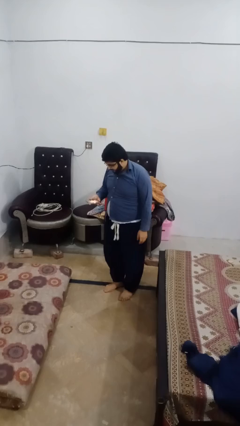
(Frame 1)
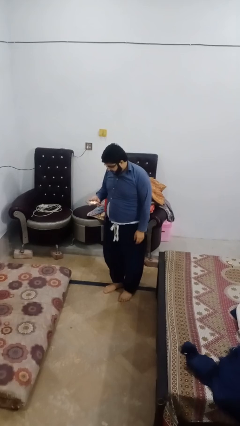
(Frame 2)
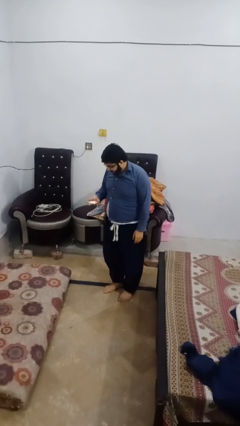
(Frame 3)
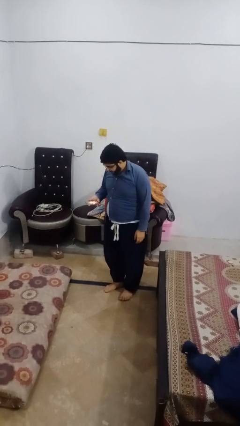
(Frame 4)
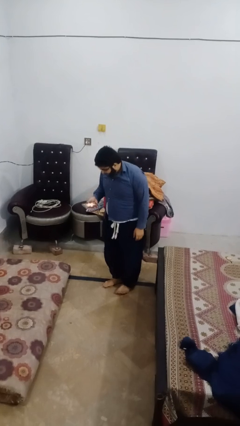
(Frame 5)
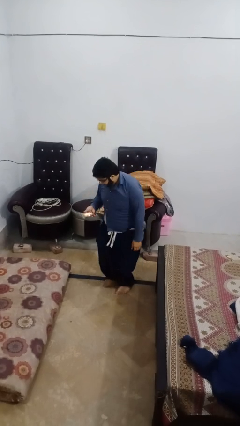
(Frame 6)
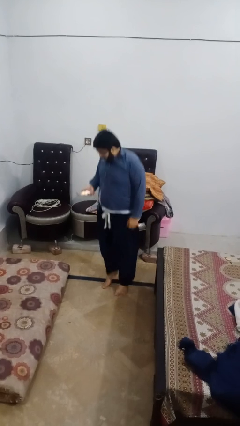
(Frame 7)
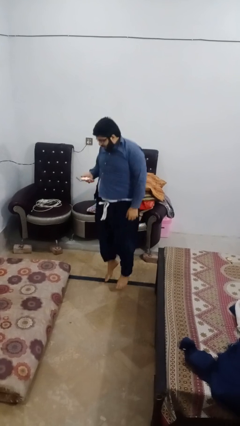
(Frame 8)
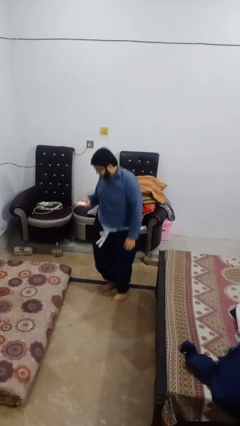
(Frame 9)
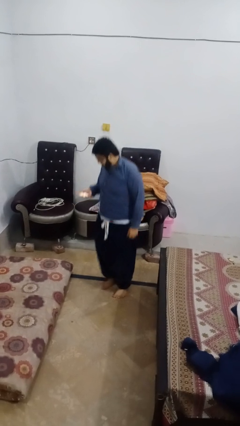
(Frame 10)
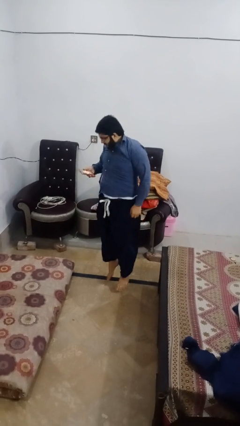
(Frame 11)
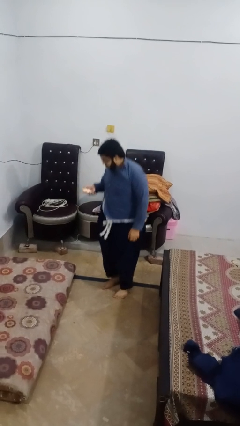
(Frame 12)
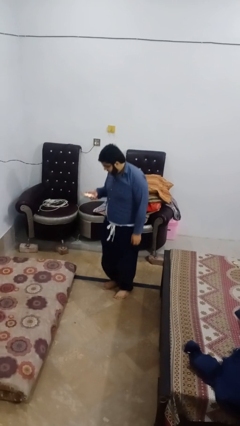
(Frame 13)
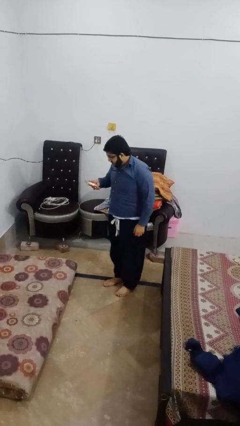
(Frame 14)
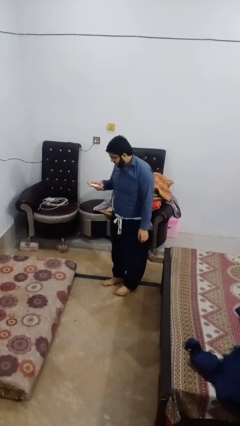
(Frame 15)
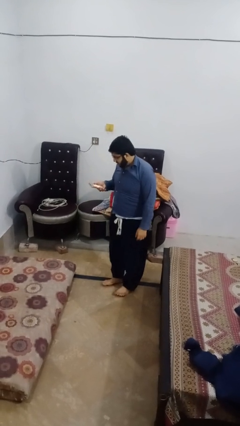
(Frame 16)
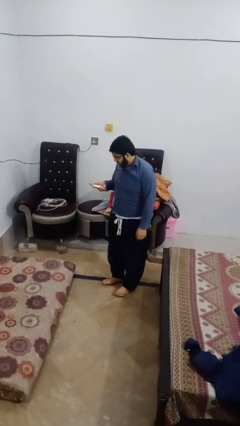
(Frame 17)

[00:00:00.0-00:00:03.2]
person jumps

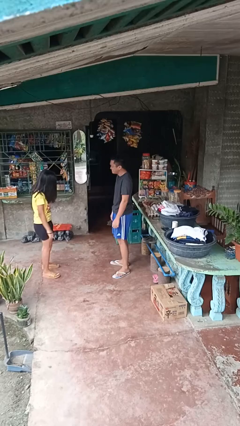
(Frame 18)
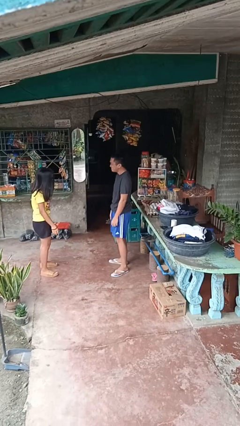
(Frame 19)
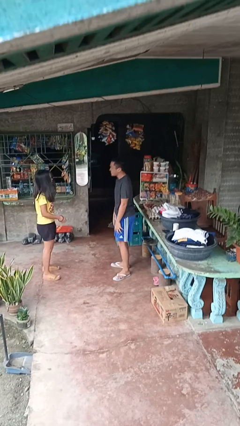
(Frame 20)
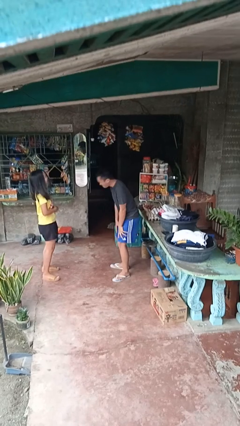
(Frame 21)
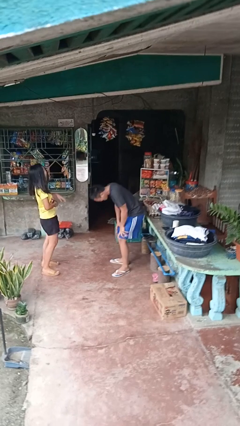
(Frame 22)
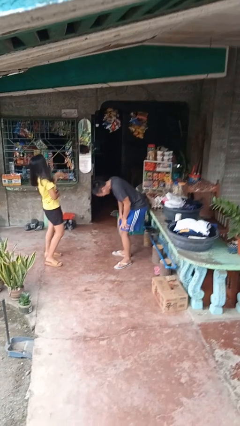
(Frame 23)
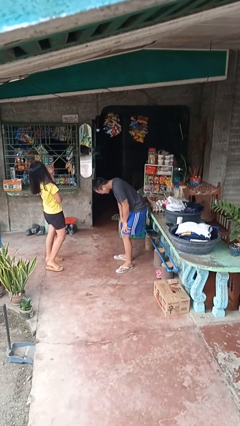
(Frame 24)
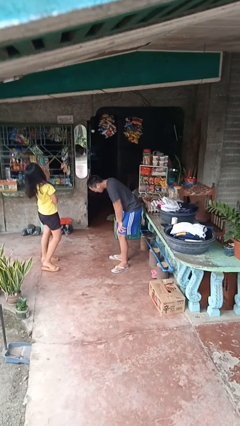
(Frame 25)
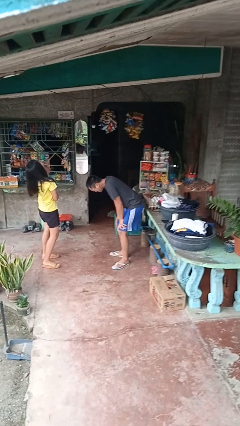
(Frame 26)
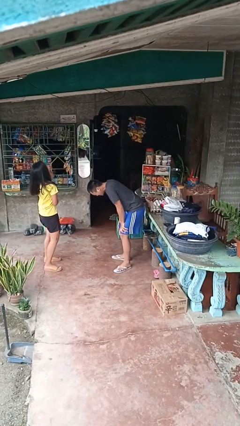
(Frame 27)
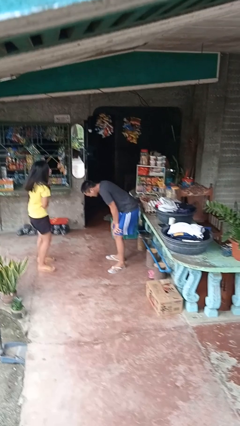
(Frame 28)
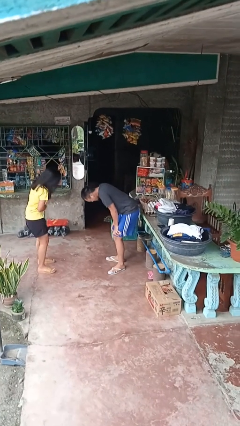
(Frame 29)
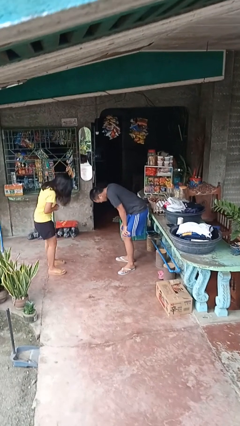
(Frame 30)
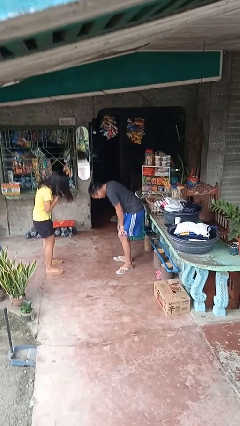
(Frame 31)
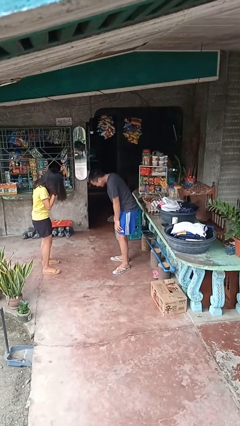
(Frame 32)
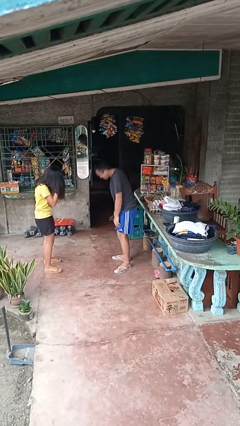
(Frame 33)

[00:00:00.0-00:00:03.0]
person laughs with person

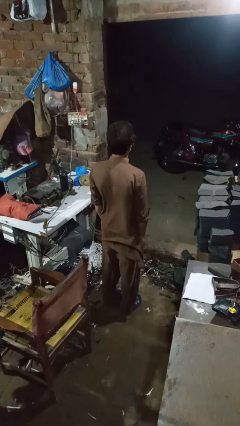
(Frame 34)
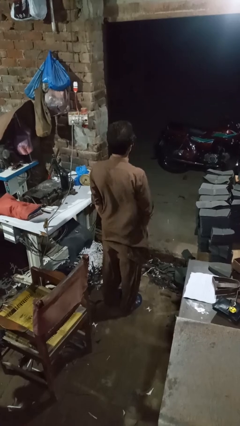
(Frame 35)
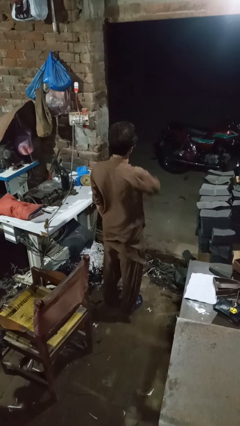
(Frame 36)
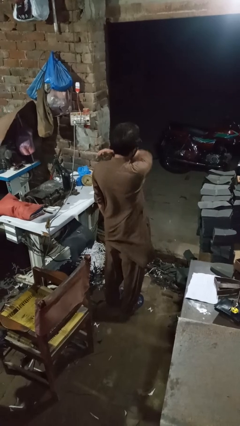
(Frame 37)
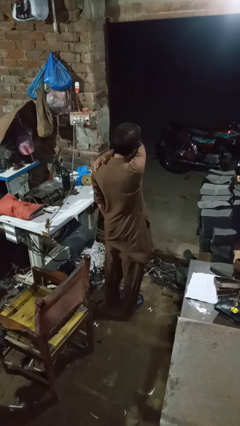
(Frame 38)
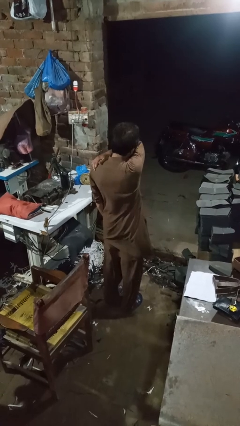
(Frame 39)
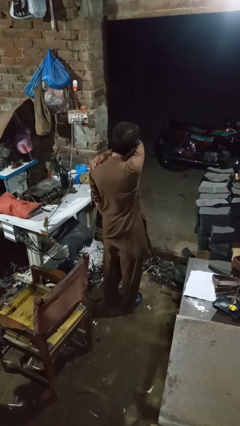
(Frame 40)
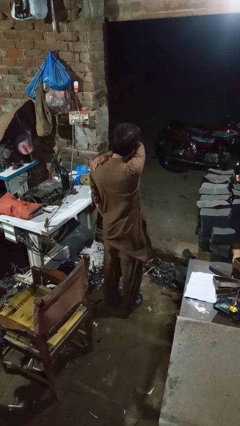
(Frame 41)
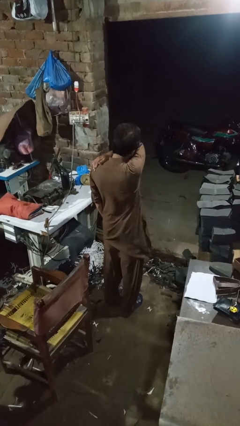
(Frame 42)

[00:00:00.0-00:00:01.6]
person sneezes into arm

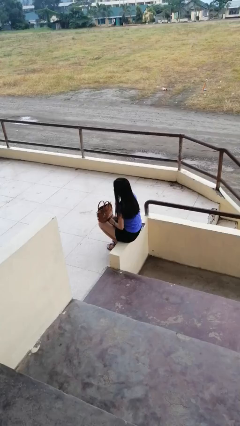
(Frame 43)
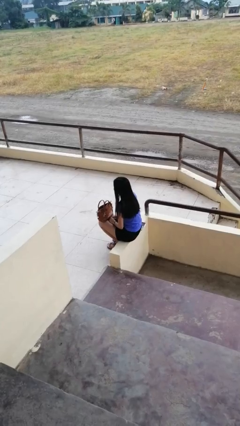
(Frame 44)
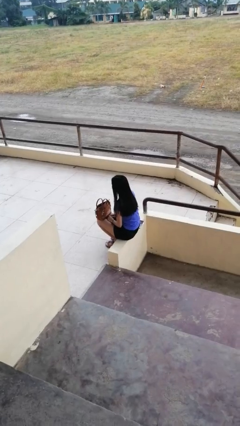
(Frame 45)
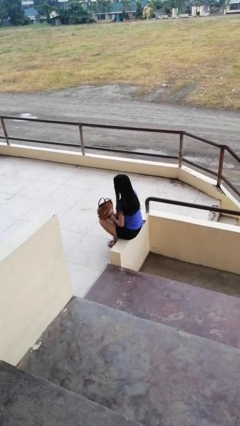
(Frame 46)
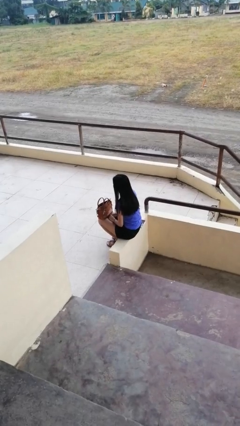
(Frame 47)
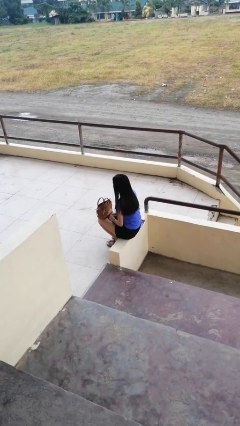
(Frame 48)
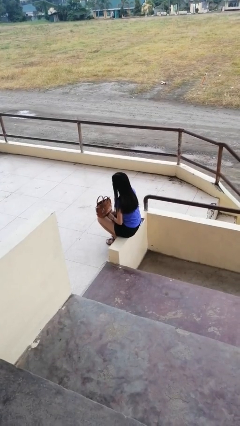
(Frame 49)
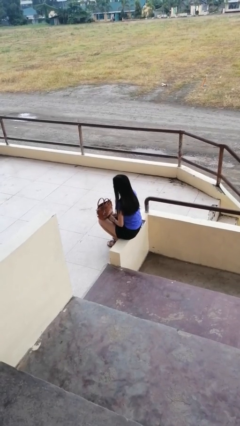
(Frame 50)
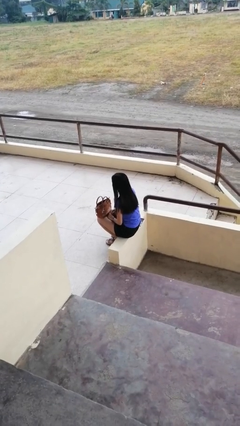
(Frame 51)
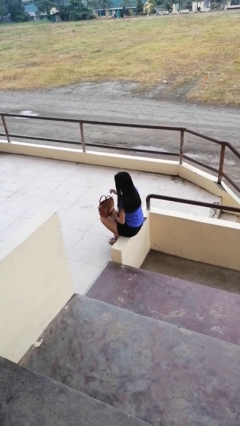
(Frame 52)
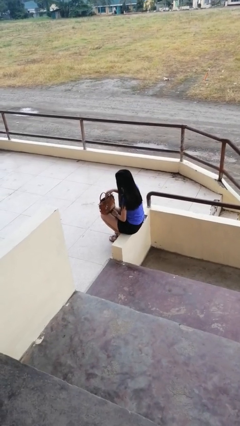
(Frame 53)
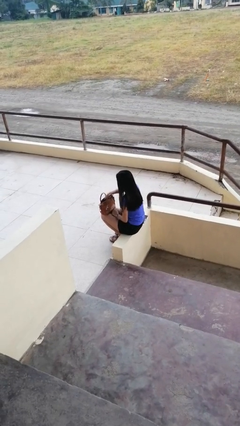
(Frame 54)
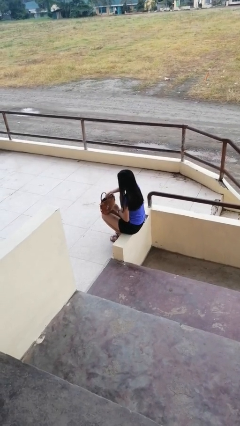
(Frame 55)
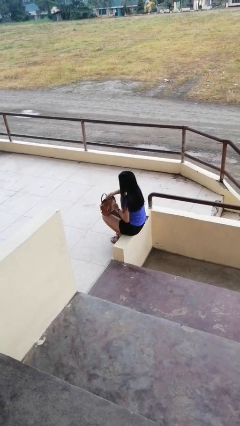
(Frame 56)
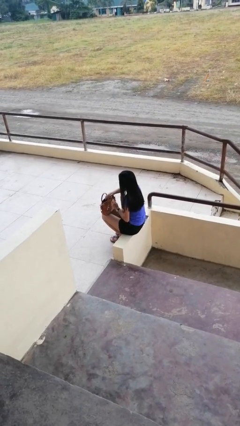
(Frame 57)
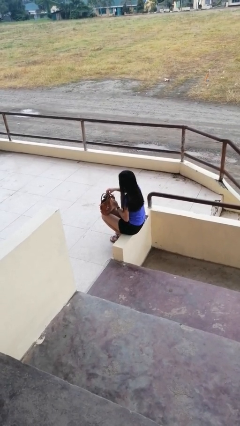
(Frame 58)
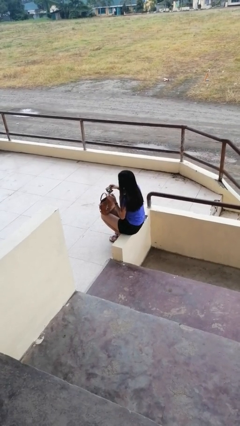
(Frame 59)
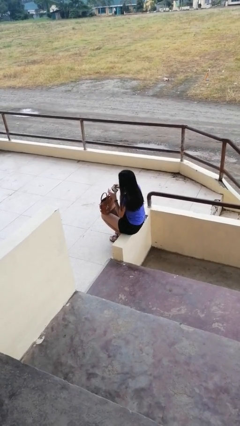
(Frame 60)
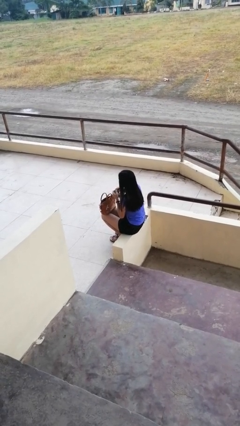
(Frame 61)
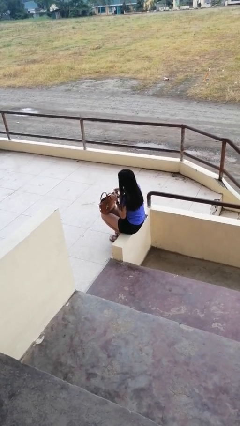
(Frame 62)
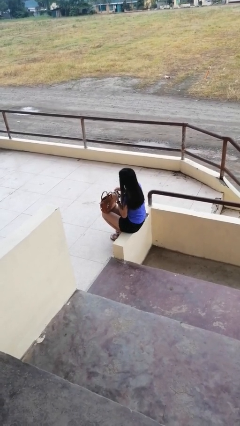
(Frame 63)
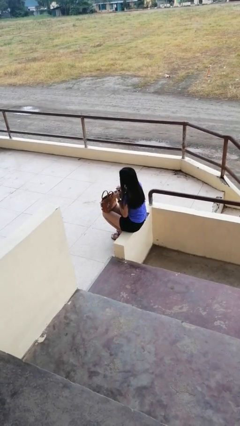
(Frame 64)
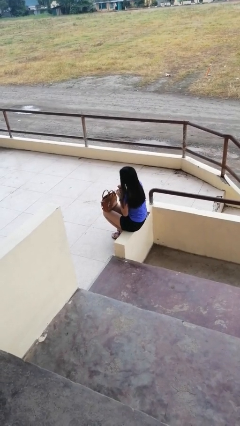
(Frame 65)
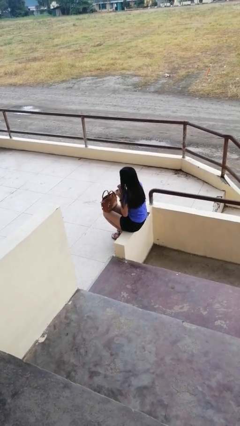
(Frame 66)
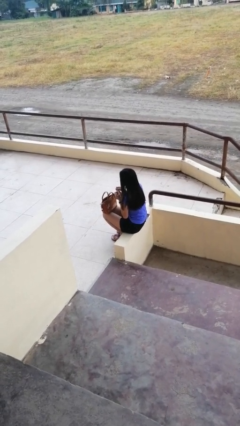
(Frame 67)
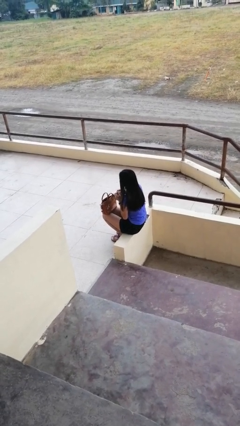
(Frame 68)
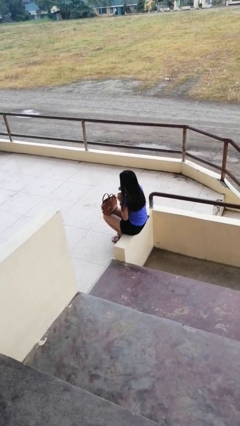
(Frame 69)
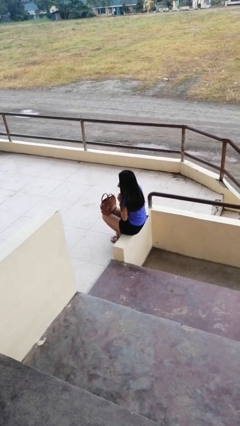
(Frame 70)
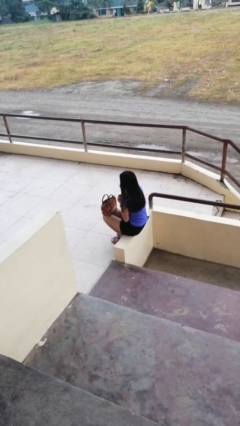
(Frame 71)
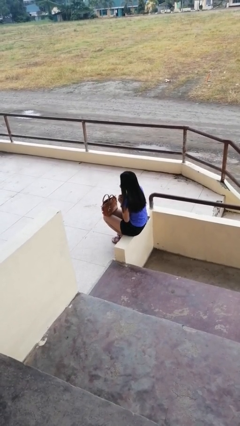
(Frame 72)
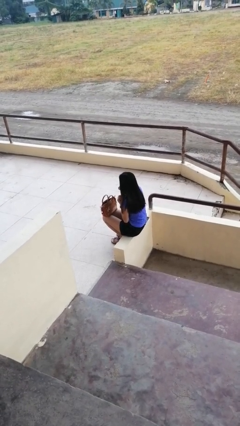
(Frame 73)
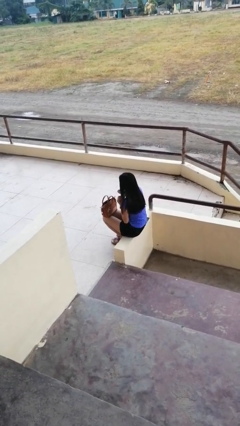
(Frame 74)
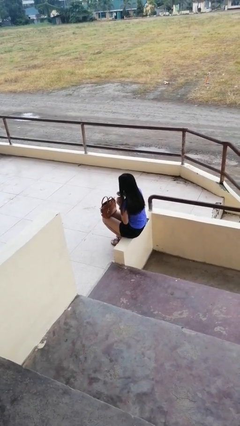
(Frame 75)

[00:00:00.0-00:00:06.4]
person eats snack from bag

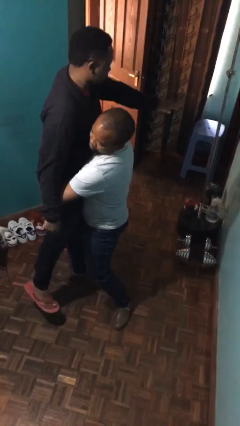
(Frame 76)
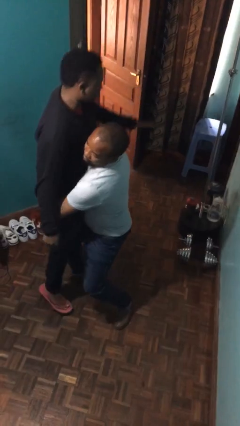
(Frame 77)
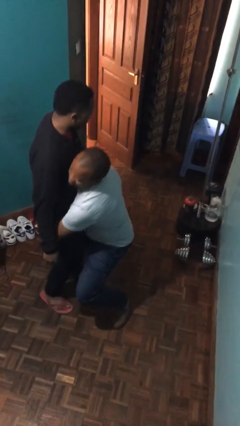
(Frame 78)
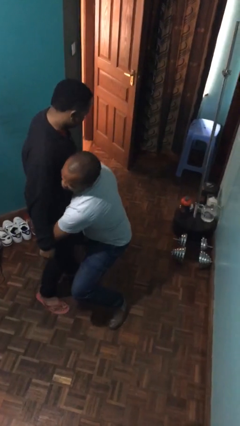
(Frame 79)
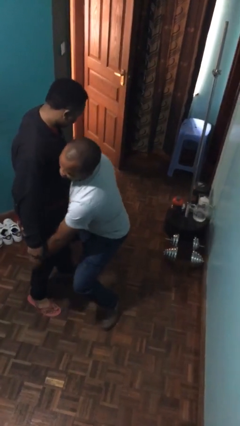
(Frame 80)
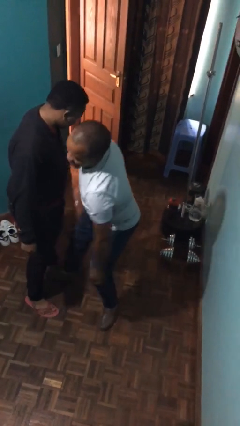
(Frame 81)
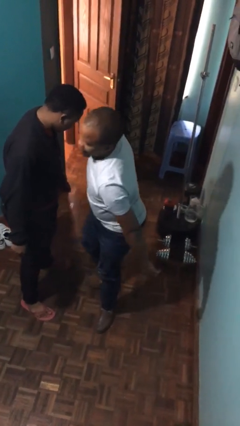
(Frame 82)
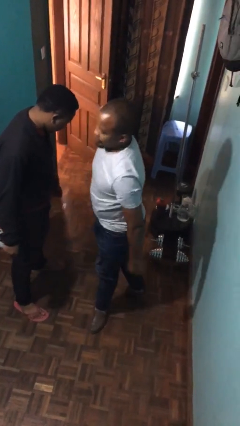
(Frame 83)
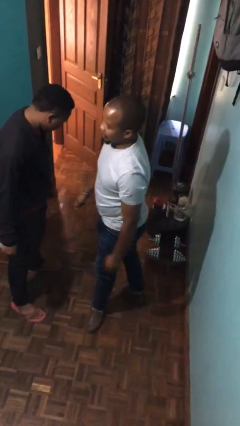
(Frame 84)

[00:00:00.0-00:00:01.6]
person puts down person

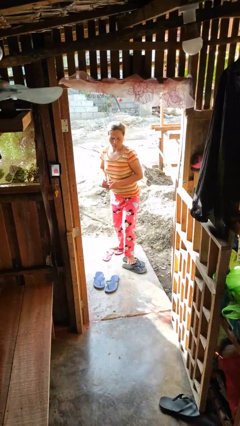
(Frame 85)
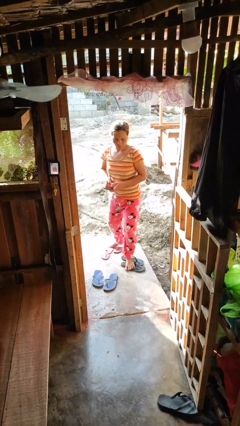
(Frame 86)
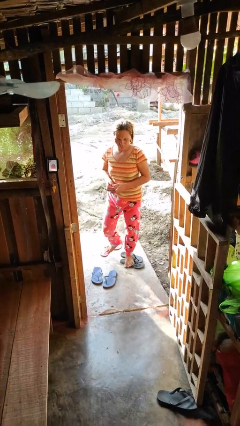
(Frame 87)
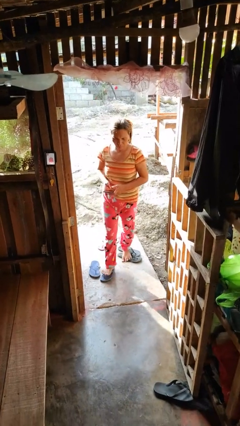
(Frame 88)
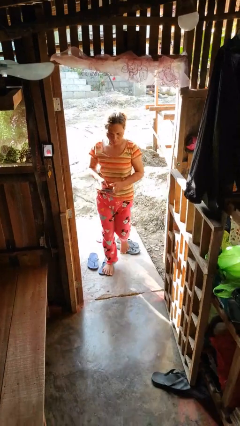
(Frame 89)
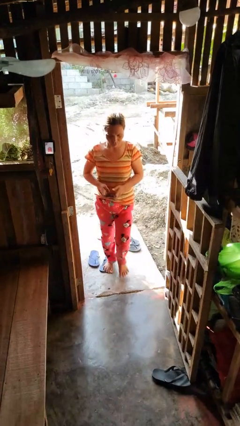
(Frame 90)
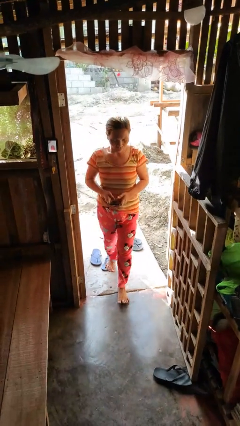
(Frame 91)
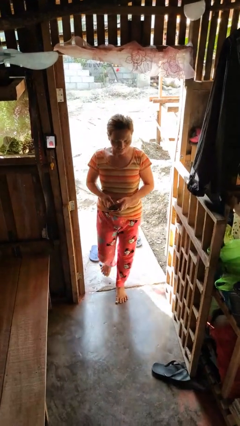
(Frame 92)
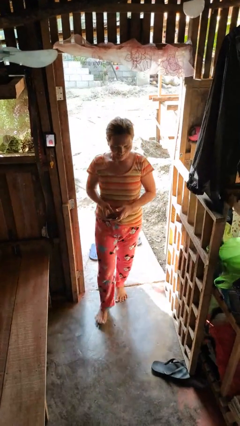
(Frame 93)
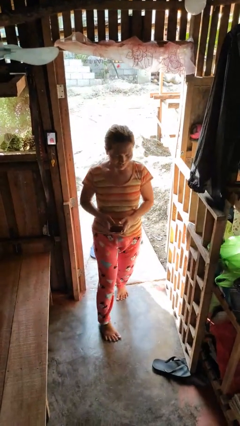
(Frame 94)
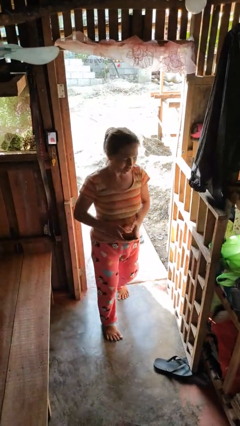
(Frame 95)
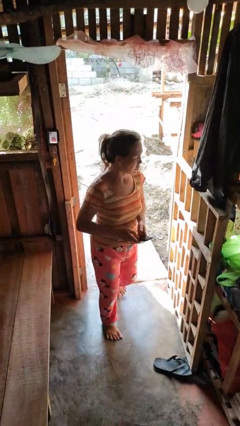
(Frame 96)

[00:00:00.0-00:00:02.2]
person enters scene through structure
